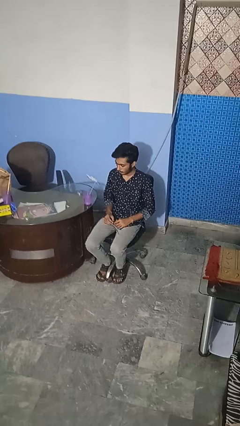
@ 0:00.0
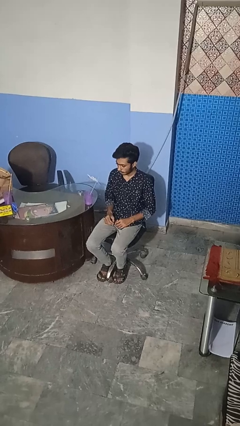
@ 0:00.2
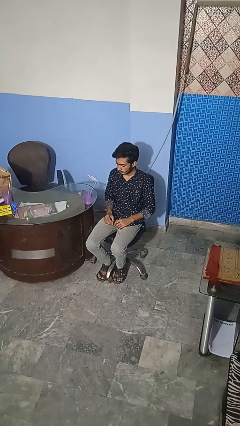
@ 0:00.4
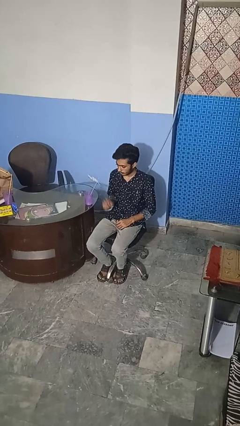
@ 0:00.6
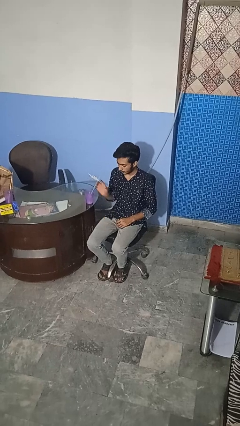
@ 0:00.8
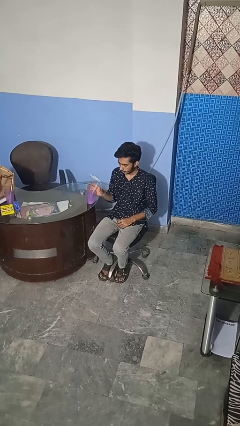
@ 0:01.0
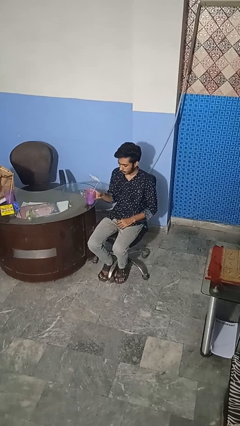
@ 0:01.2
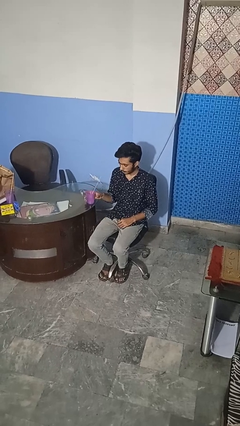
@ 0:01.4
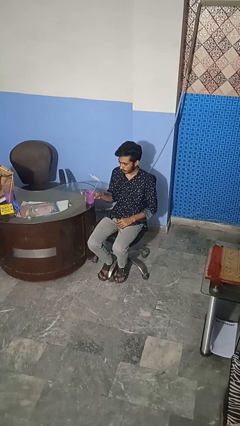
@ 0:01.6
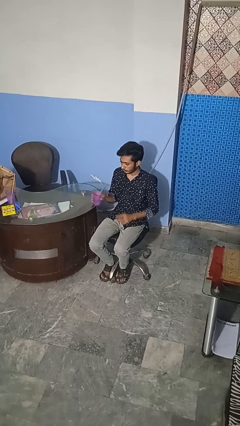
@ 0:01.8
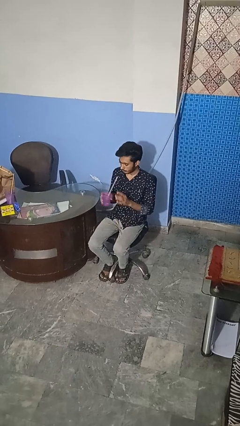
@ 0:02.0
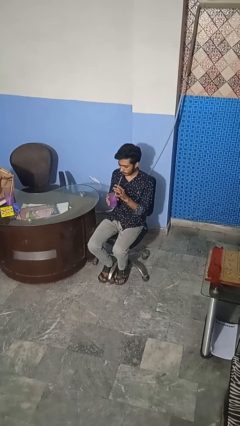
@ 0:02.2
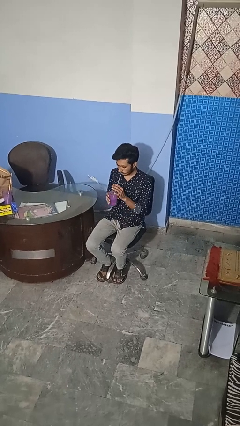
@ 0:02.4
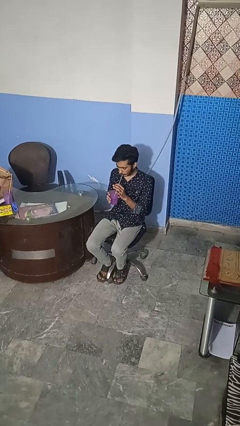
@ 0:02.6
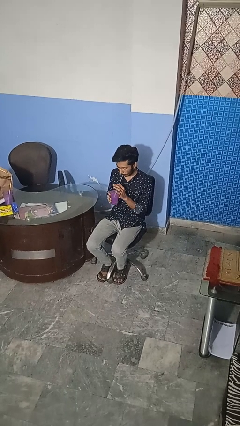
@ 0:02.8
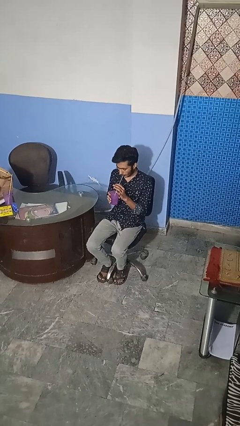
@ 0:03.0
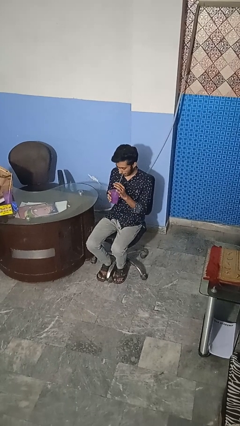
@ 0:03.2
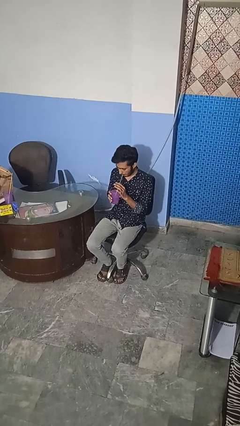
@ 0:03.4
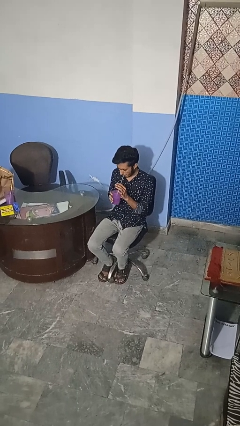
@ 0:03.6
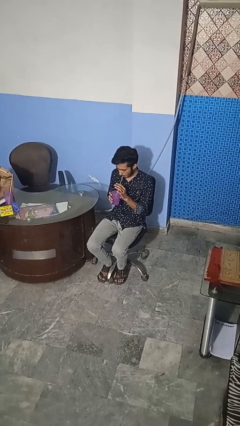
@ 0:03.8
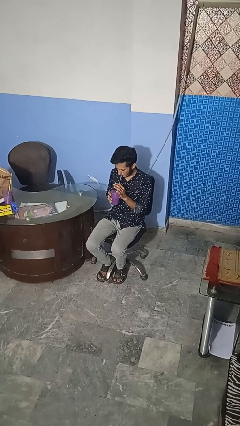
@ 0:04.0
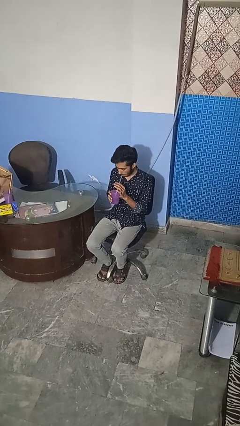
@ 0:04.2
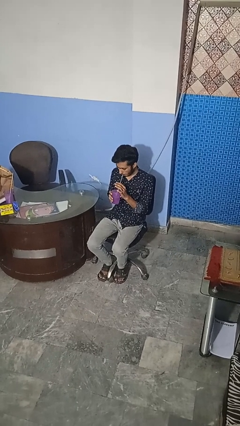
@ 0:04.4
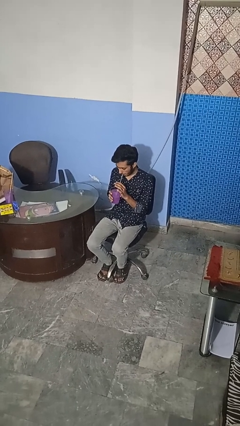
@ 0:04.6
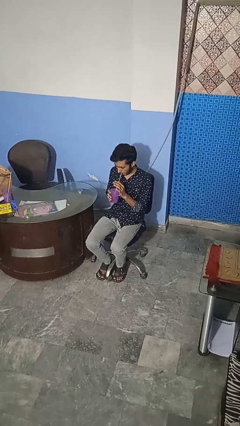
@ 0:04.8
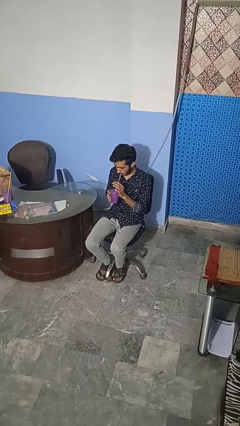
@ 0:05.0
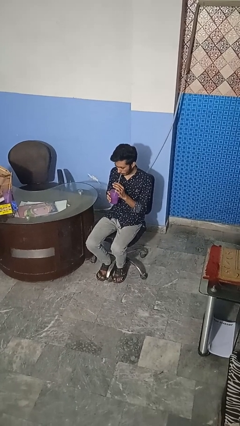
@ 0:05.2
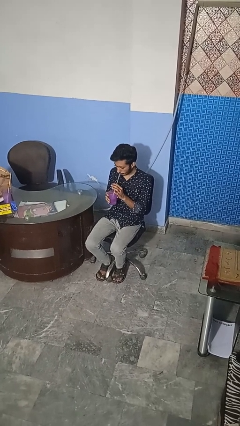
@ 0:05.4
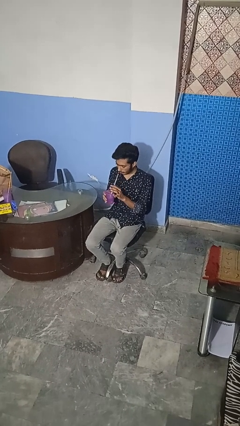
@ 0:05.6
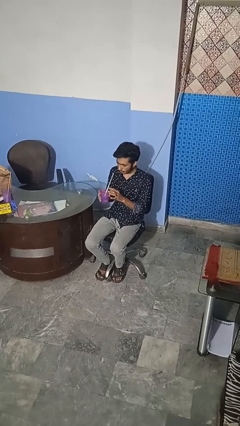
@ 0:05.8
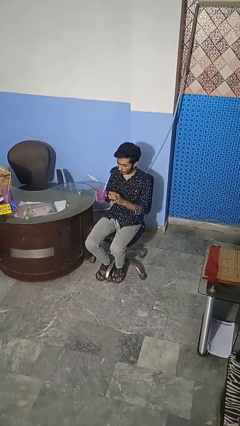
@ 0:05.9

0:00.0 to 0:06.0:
person drinks from straw

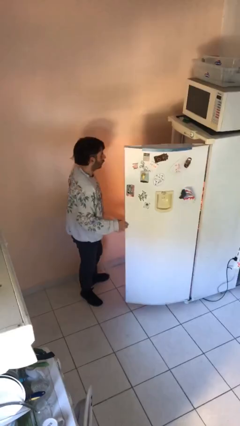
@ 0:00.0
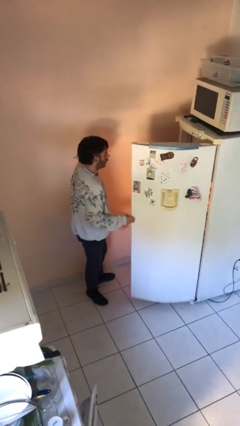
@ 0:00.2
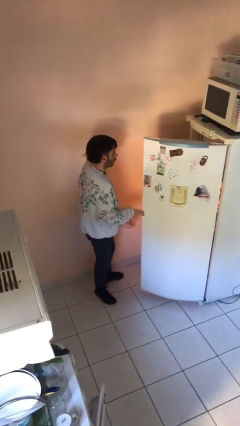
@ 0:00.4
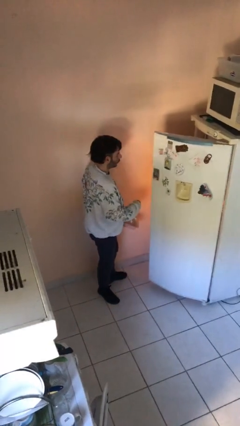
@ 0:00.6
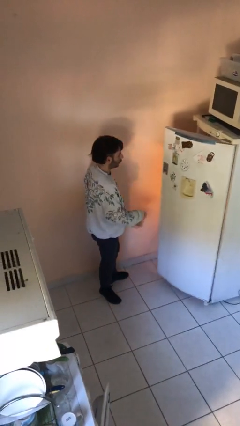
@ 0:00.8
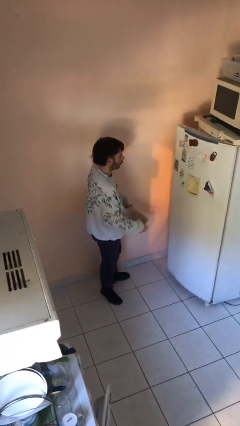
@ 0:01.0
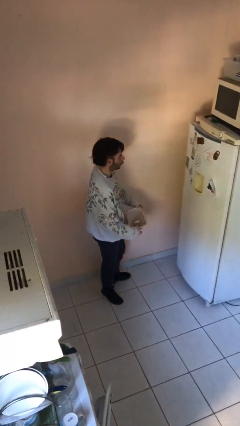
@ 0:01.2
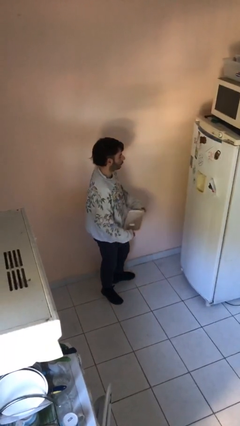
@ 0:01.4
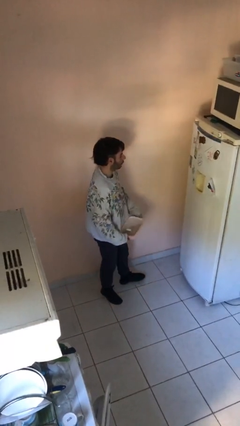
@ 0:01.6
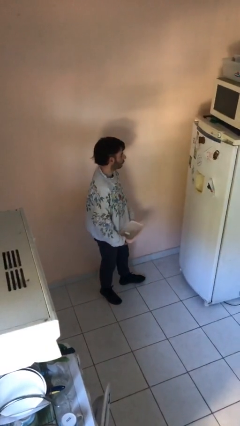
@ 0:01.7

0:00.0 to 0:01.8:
person closes refrigerator

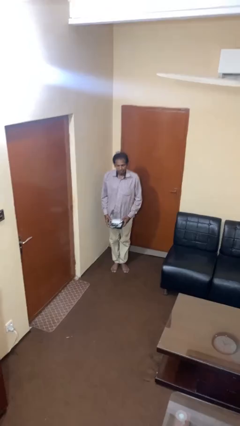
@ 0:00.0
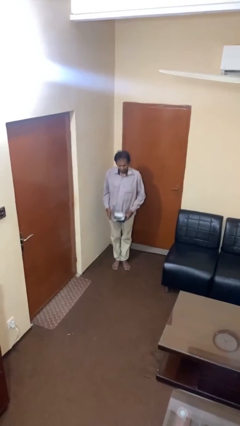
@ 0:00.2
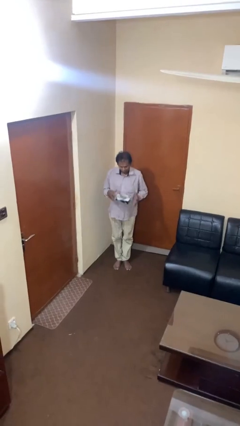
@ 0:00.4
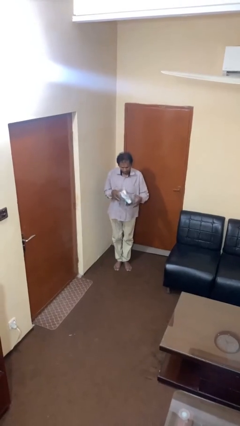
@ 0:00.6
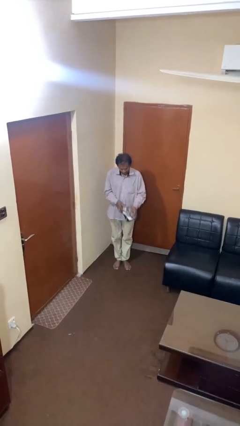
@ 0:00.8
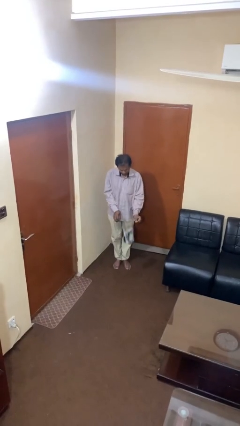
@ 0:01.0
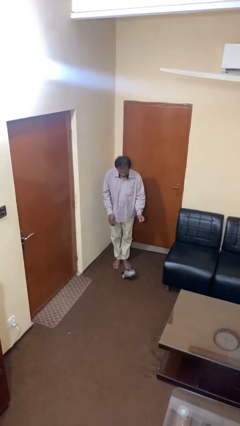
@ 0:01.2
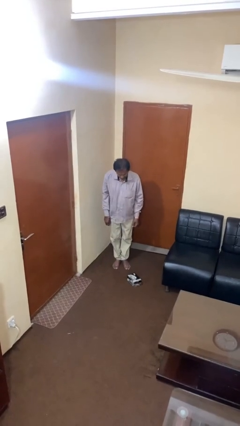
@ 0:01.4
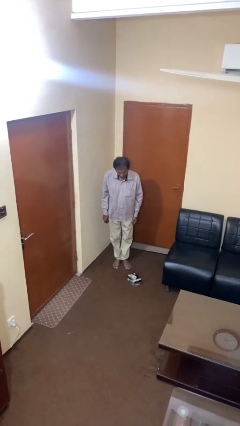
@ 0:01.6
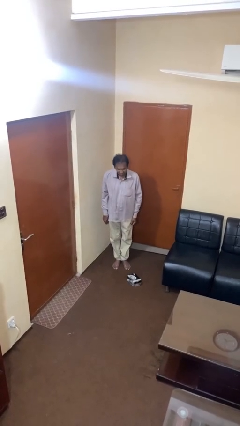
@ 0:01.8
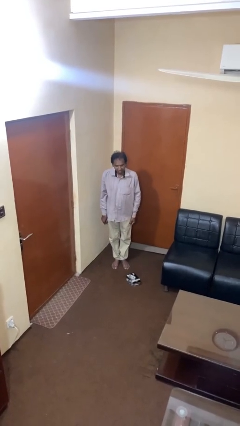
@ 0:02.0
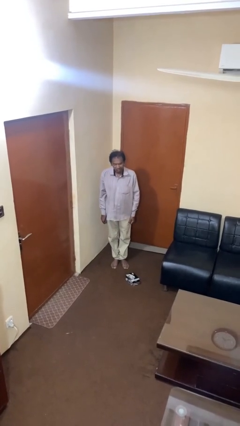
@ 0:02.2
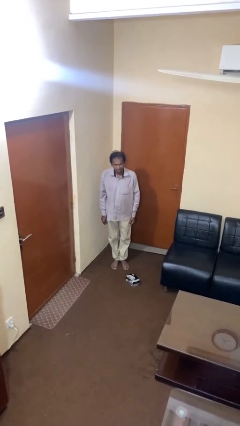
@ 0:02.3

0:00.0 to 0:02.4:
person drops object

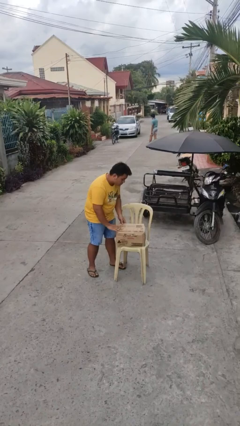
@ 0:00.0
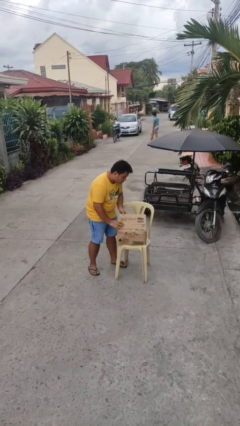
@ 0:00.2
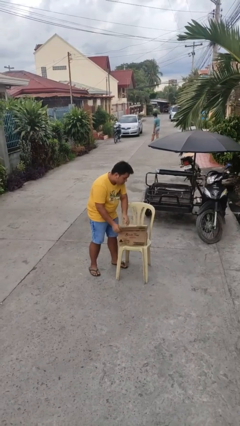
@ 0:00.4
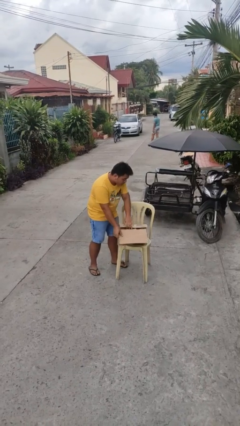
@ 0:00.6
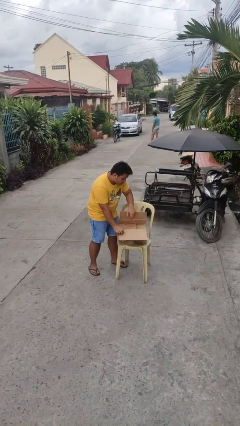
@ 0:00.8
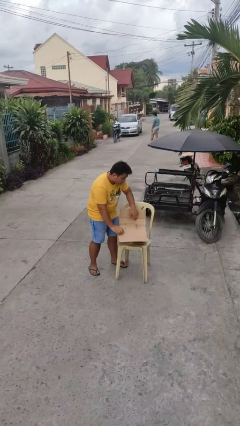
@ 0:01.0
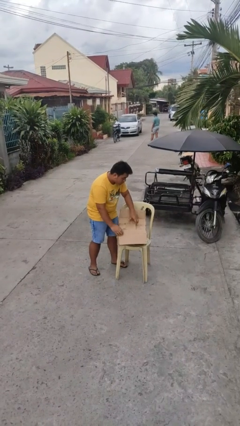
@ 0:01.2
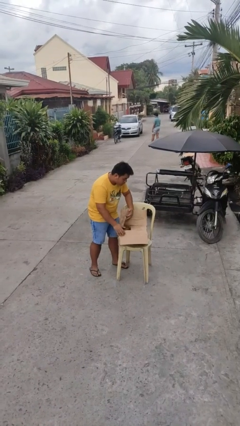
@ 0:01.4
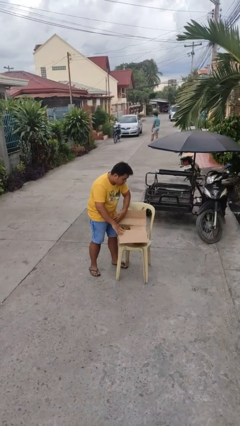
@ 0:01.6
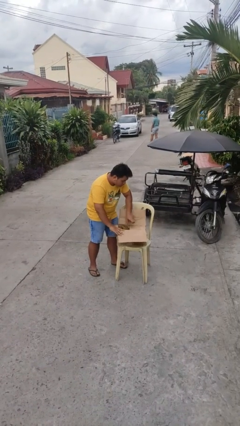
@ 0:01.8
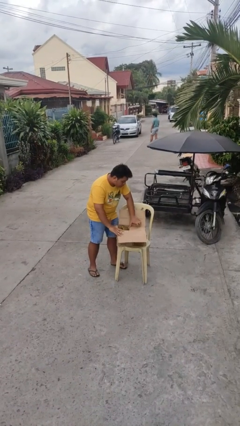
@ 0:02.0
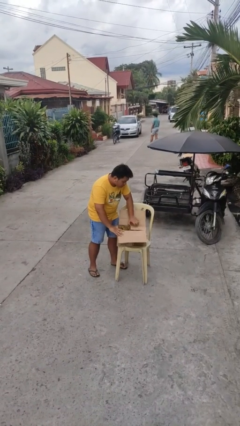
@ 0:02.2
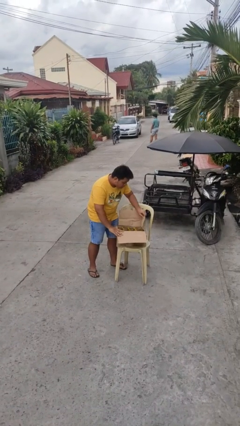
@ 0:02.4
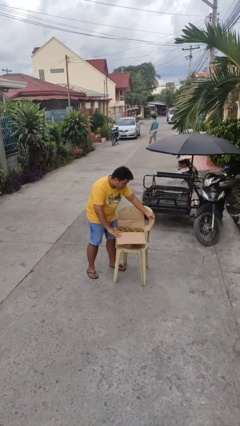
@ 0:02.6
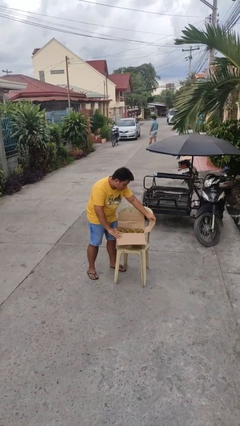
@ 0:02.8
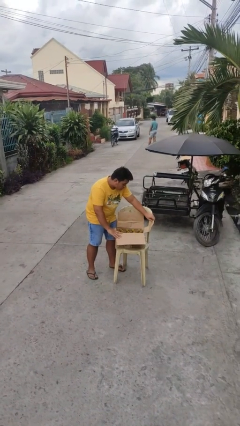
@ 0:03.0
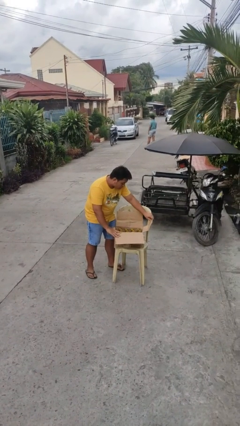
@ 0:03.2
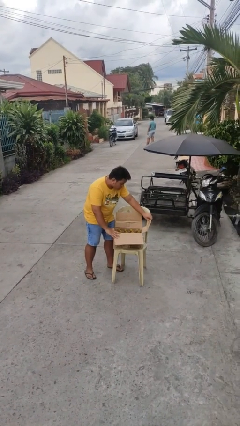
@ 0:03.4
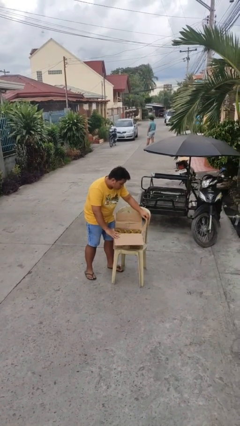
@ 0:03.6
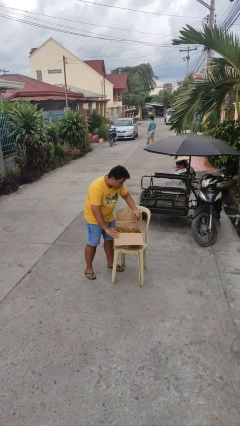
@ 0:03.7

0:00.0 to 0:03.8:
person opens box

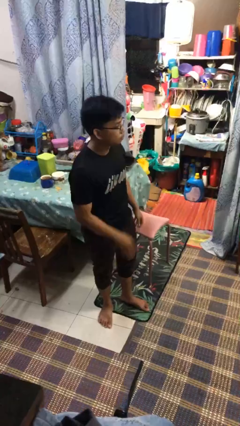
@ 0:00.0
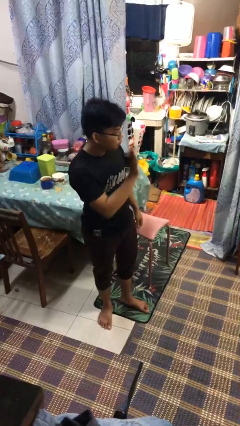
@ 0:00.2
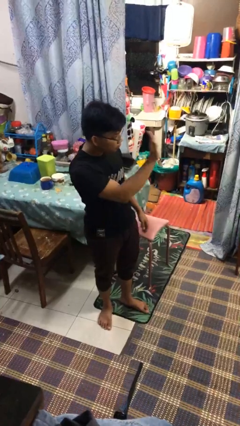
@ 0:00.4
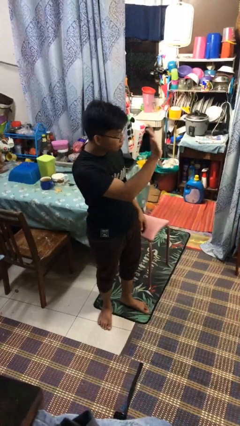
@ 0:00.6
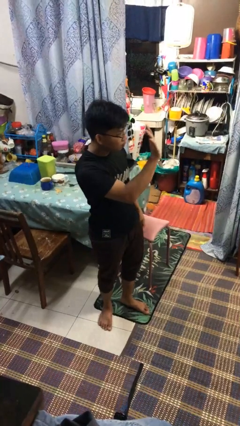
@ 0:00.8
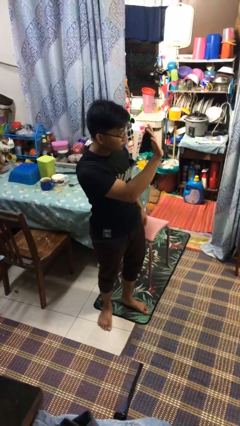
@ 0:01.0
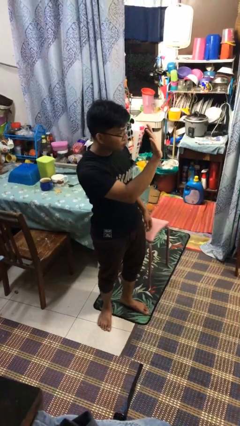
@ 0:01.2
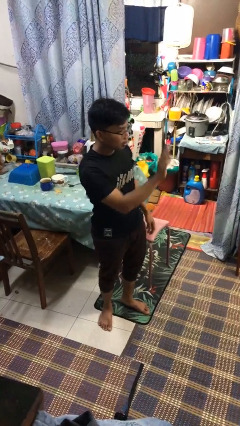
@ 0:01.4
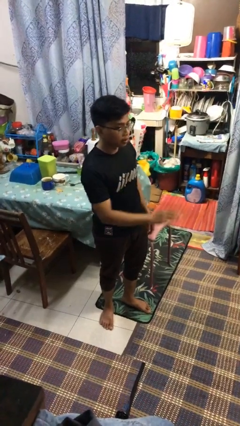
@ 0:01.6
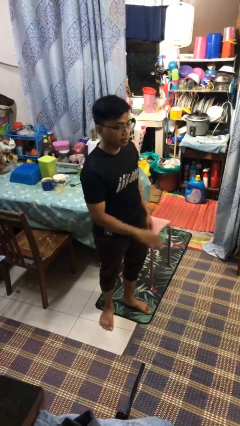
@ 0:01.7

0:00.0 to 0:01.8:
person gestures stop

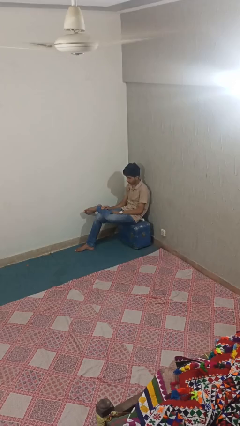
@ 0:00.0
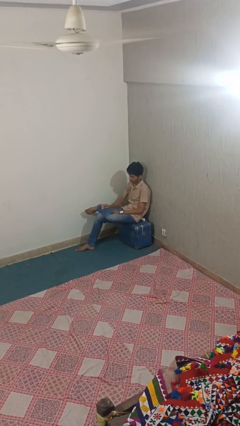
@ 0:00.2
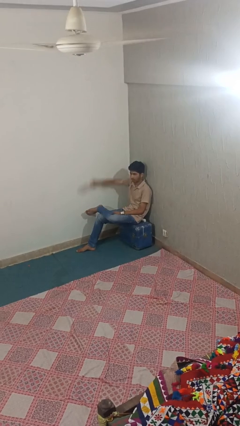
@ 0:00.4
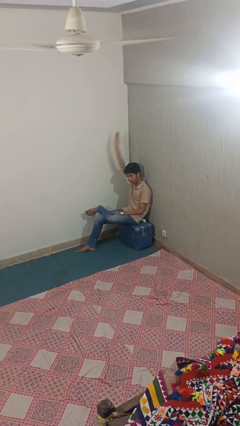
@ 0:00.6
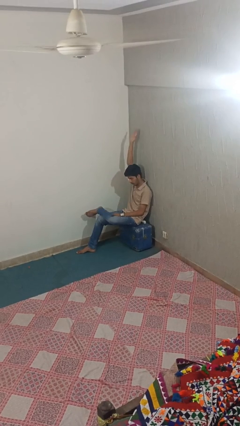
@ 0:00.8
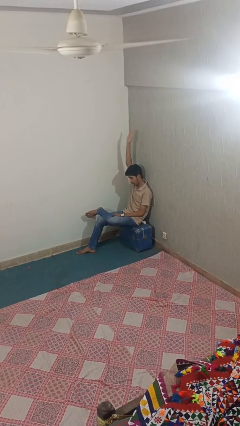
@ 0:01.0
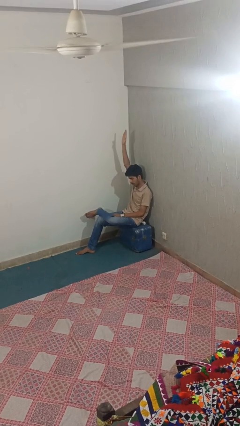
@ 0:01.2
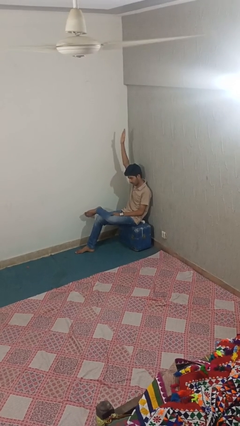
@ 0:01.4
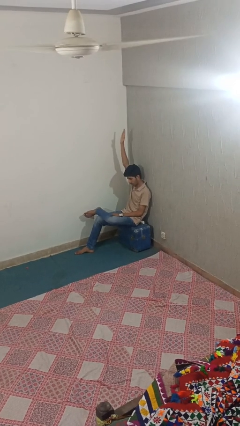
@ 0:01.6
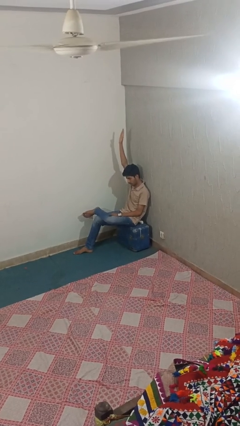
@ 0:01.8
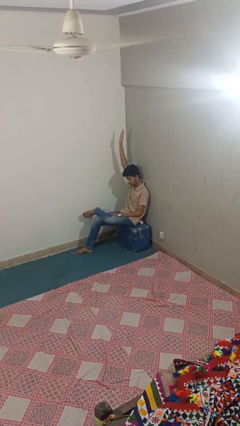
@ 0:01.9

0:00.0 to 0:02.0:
person gestures raise hand
